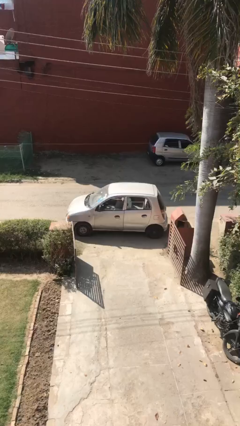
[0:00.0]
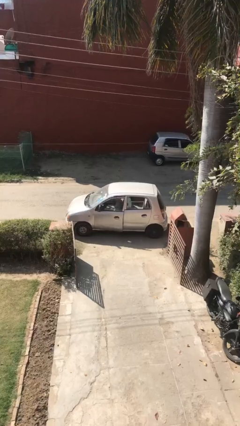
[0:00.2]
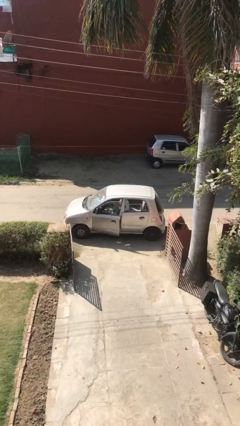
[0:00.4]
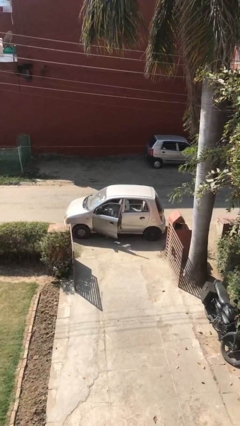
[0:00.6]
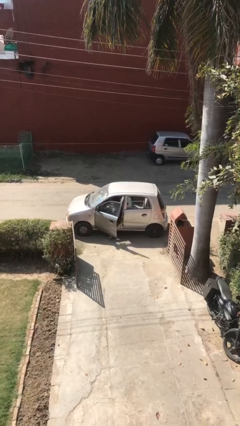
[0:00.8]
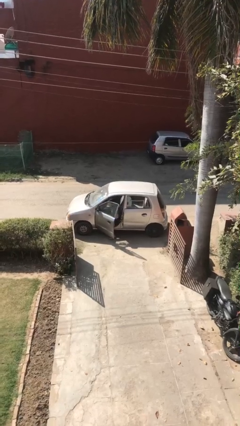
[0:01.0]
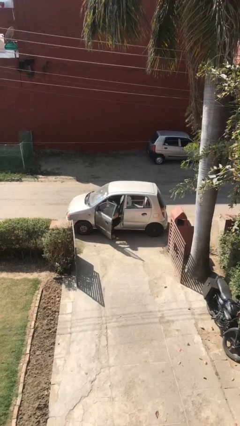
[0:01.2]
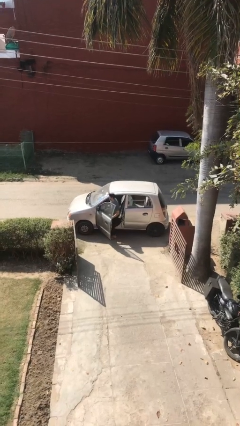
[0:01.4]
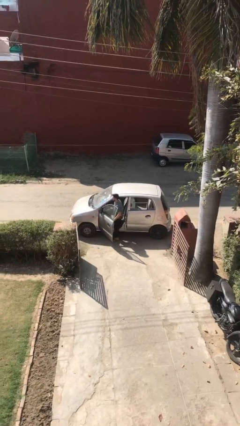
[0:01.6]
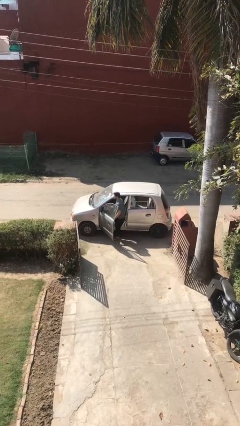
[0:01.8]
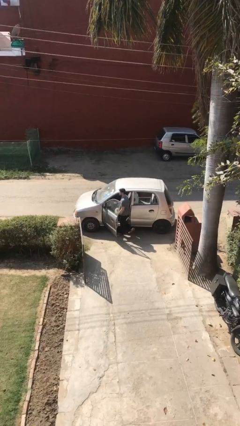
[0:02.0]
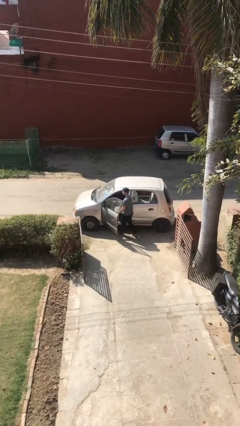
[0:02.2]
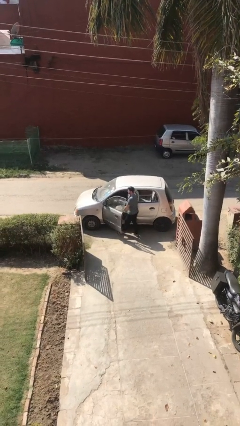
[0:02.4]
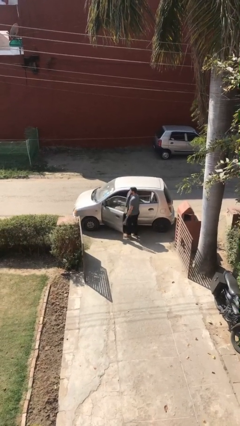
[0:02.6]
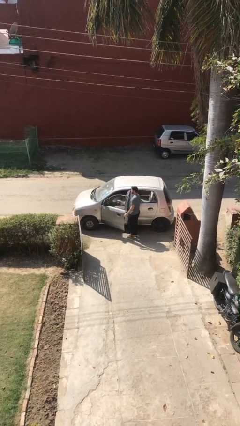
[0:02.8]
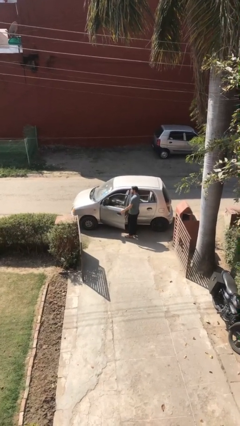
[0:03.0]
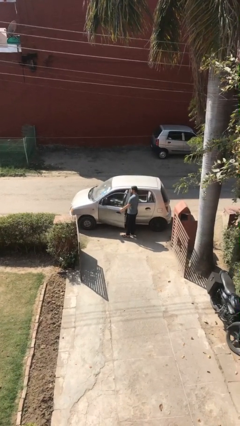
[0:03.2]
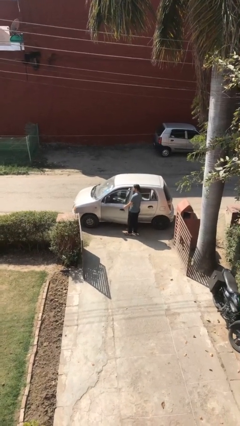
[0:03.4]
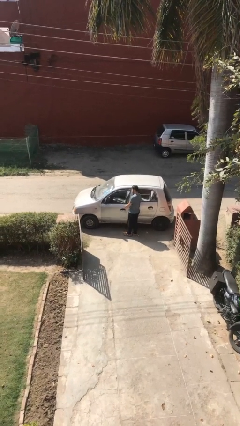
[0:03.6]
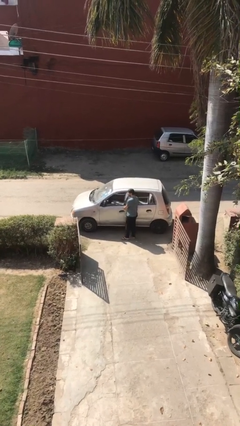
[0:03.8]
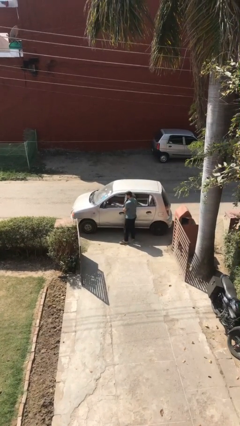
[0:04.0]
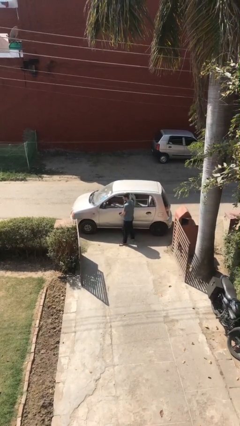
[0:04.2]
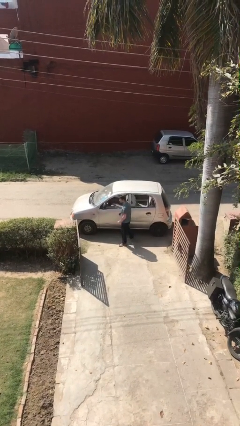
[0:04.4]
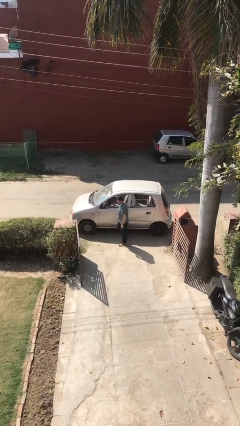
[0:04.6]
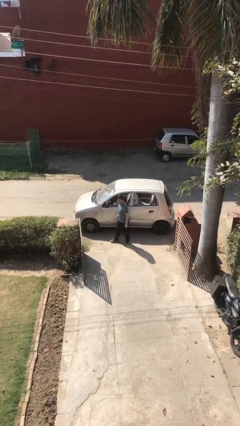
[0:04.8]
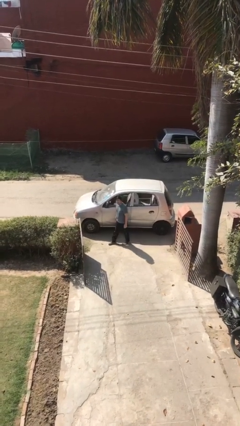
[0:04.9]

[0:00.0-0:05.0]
car drops off person

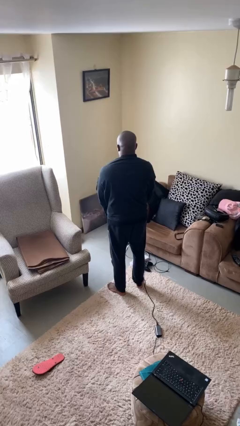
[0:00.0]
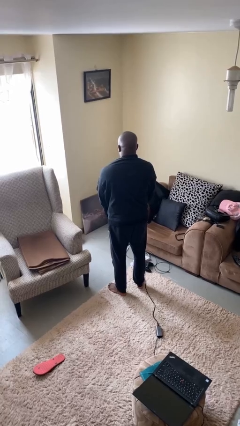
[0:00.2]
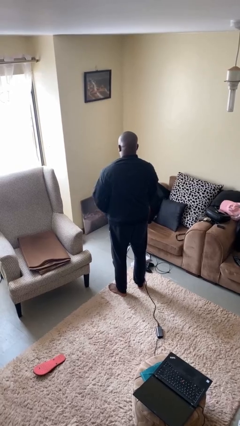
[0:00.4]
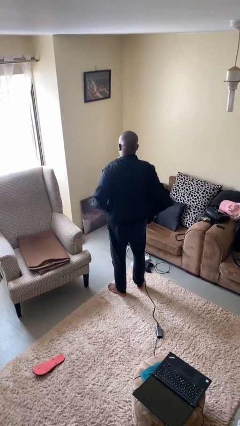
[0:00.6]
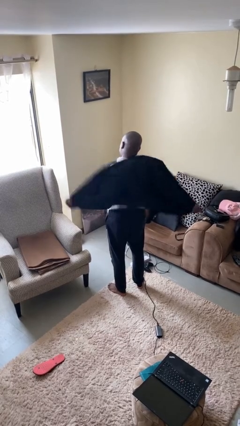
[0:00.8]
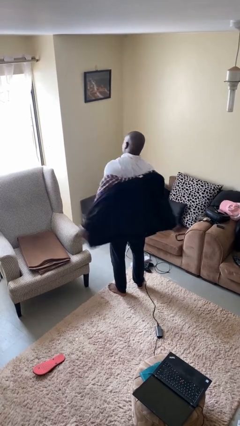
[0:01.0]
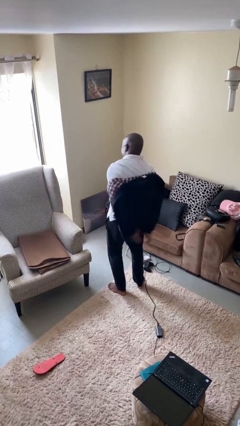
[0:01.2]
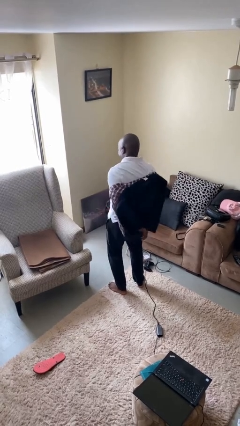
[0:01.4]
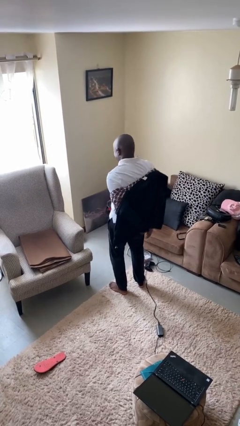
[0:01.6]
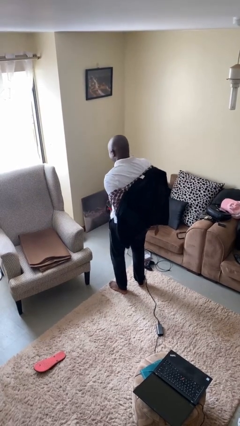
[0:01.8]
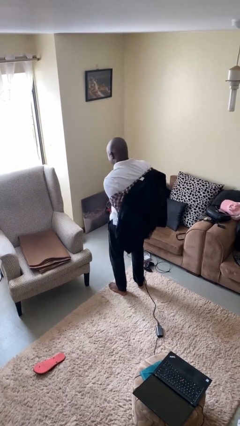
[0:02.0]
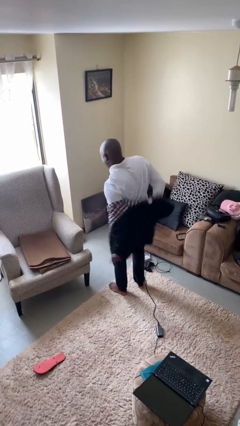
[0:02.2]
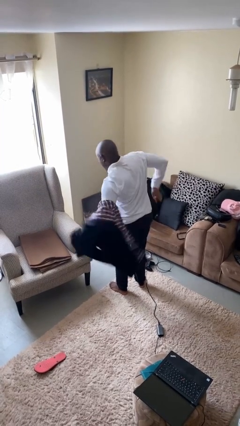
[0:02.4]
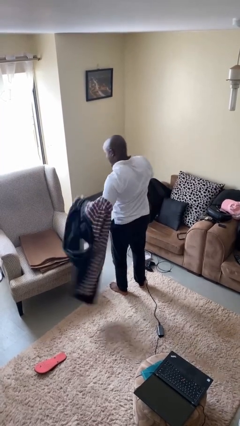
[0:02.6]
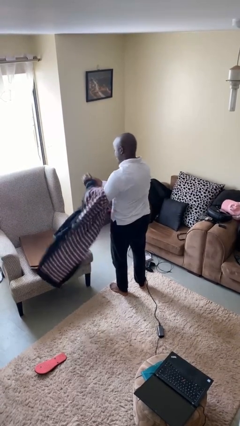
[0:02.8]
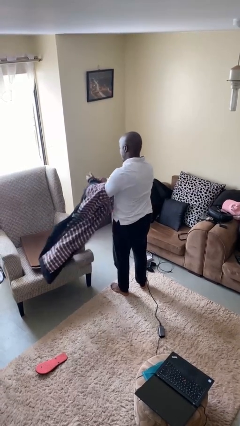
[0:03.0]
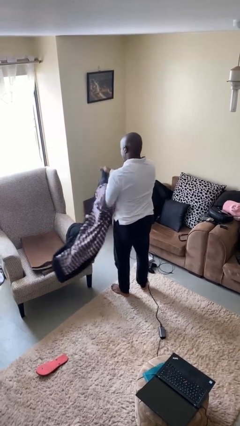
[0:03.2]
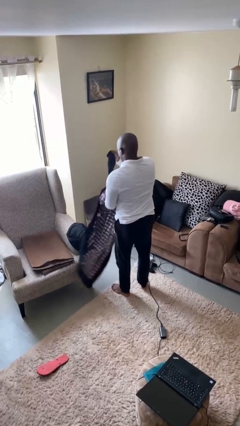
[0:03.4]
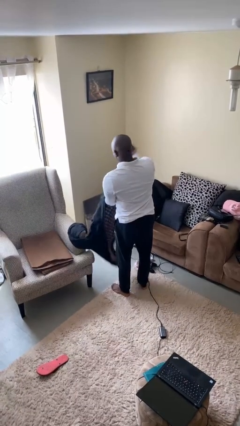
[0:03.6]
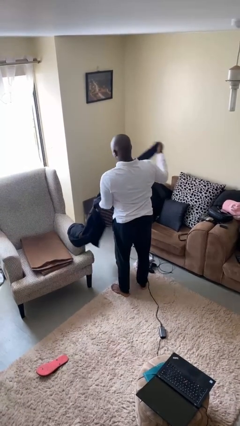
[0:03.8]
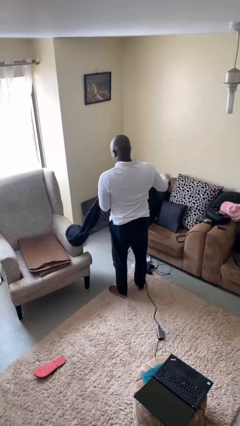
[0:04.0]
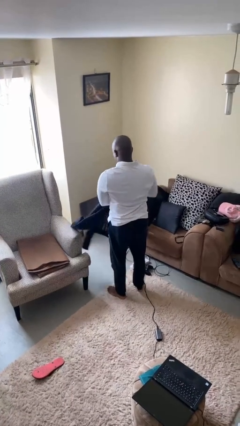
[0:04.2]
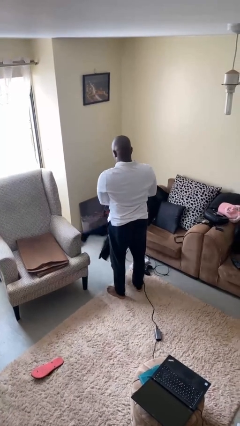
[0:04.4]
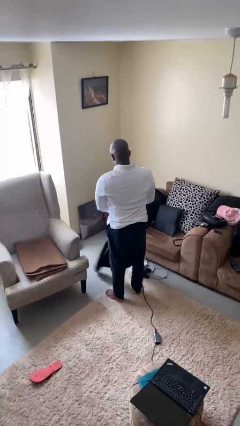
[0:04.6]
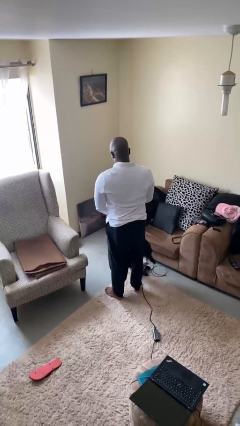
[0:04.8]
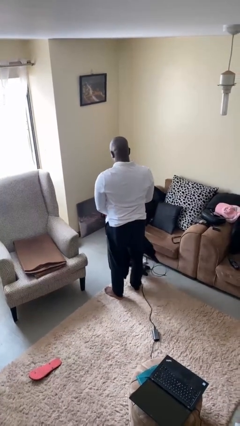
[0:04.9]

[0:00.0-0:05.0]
person takes off jacket

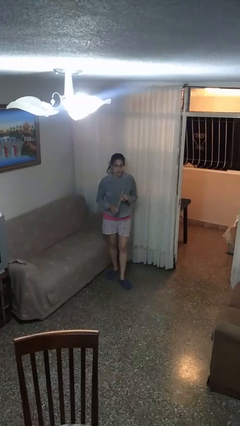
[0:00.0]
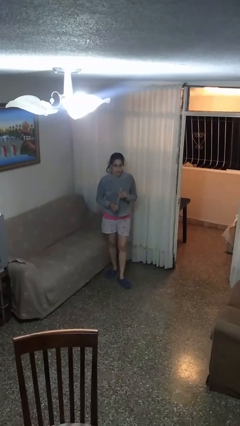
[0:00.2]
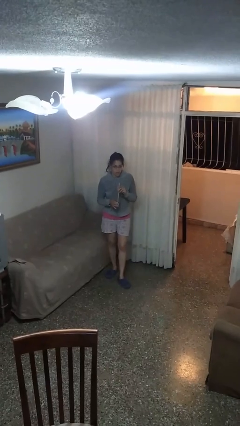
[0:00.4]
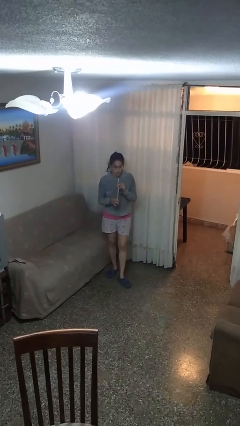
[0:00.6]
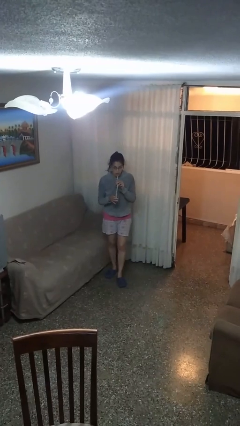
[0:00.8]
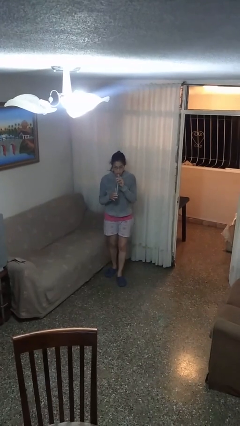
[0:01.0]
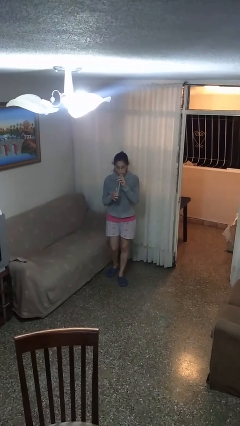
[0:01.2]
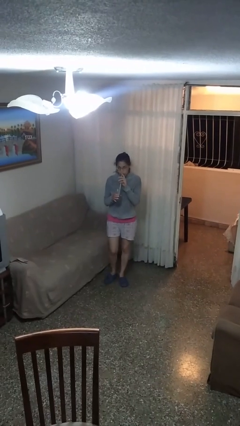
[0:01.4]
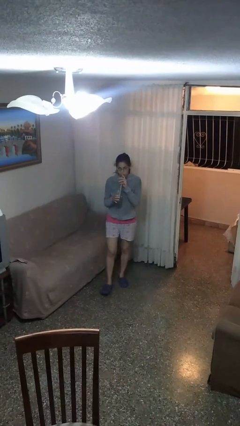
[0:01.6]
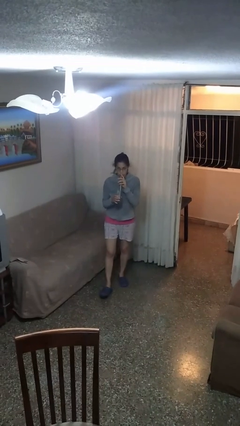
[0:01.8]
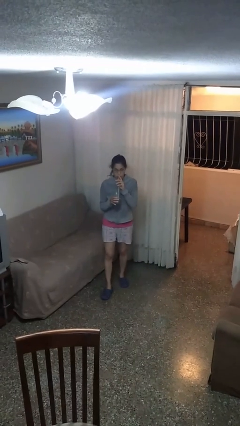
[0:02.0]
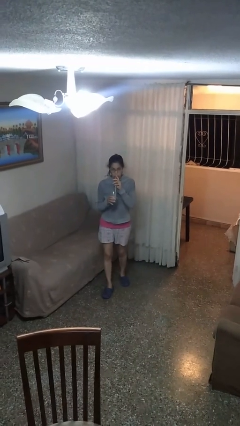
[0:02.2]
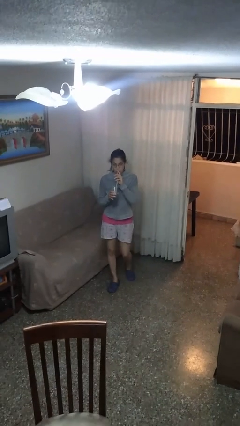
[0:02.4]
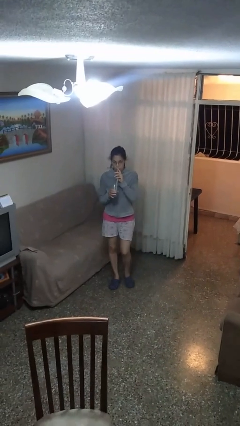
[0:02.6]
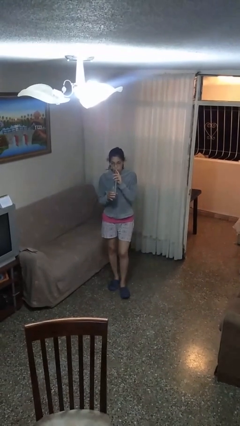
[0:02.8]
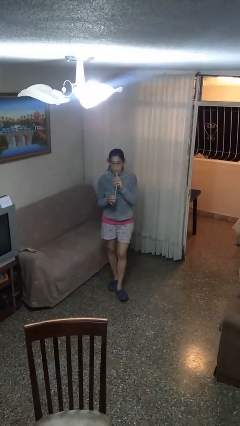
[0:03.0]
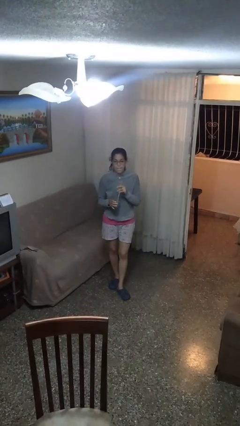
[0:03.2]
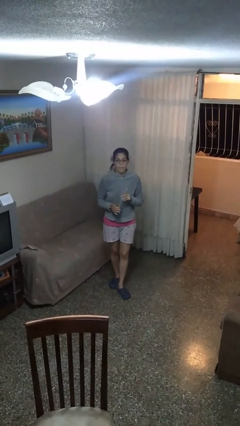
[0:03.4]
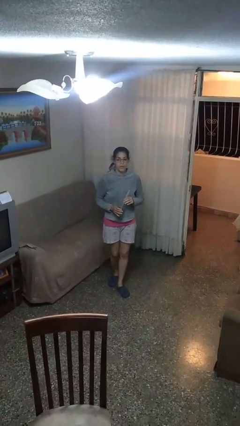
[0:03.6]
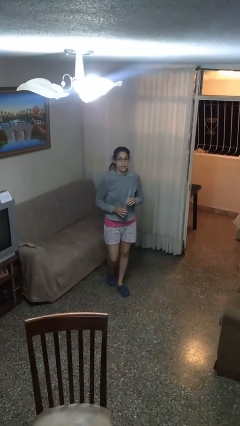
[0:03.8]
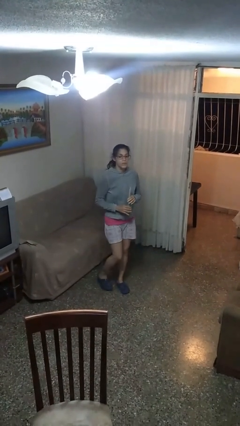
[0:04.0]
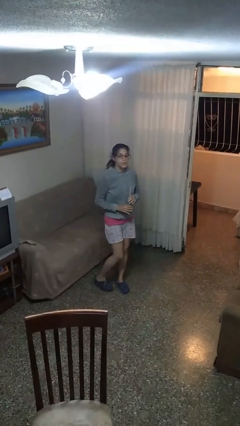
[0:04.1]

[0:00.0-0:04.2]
person drinks from straw

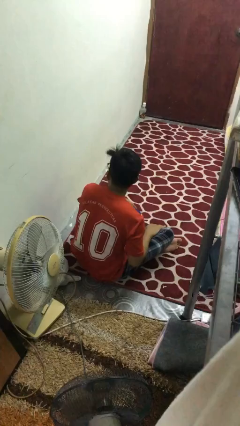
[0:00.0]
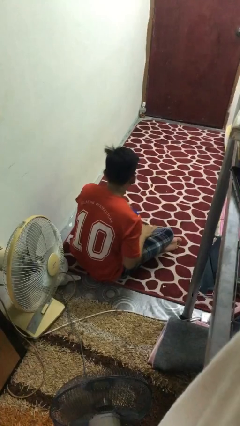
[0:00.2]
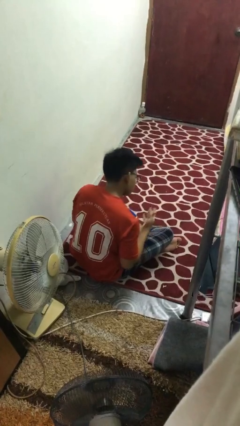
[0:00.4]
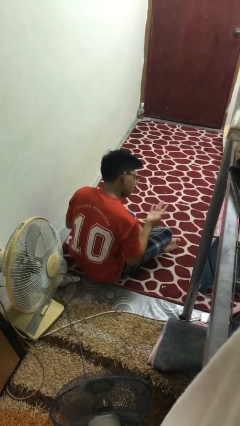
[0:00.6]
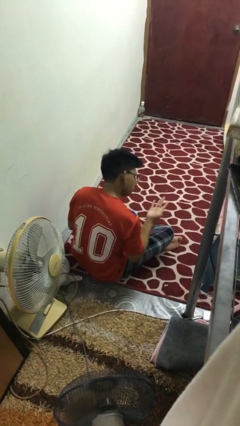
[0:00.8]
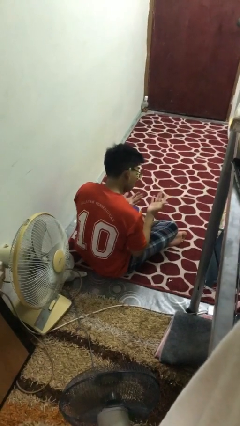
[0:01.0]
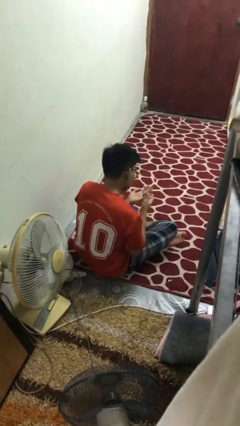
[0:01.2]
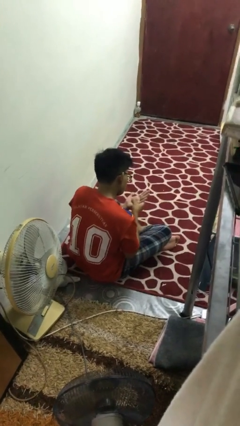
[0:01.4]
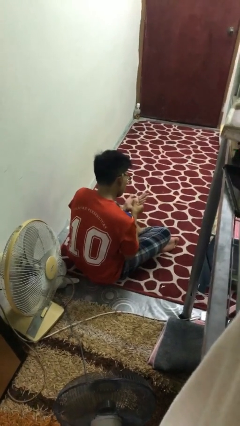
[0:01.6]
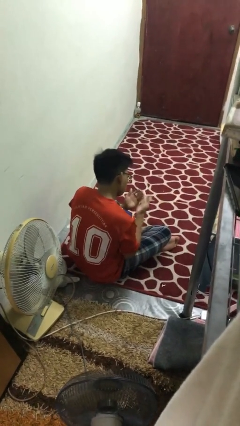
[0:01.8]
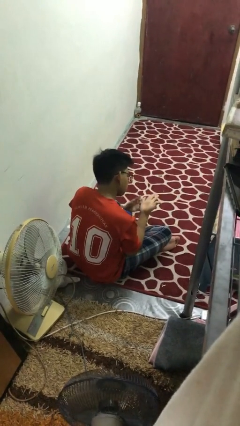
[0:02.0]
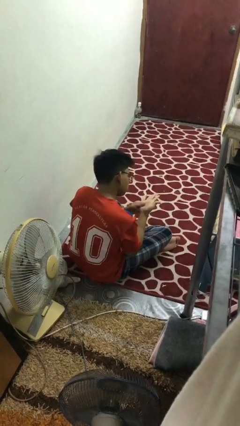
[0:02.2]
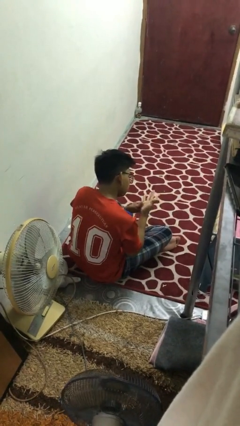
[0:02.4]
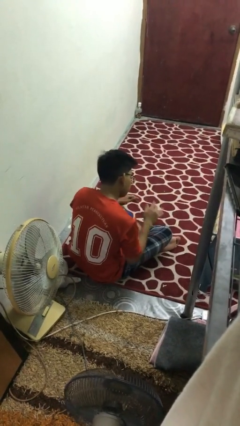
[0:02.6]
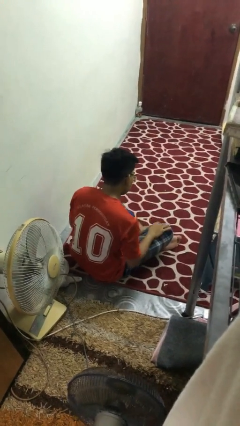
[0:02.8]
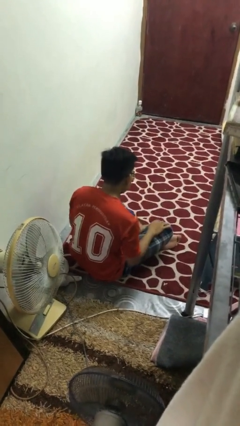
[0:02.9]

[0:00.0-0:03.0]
person looks at hands in lap
